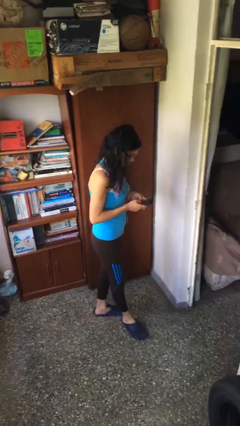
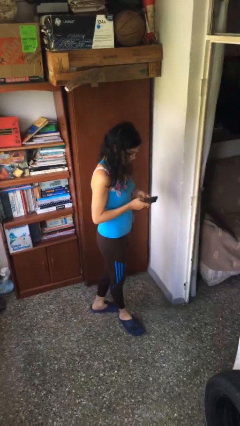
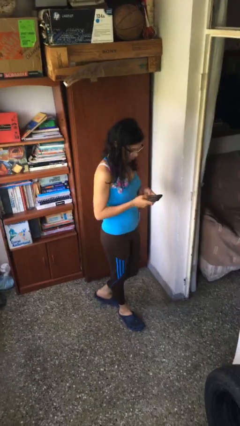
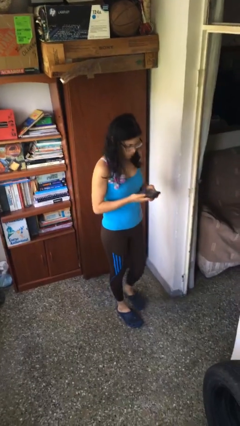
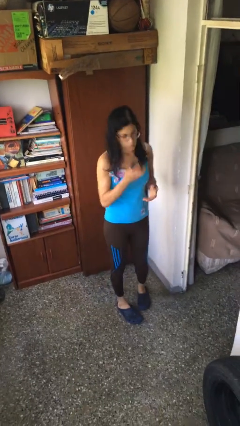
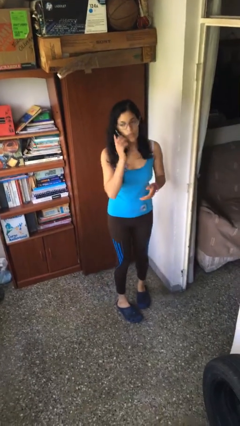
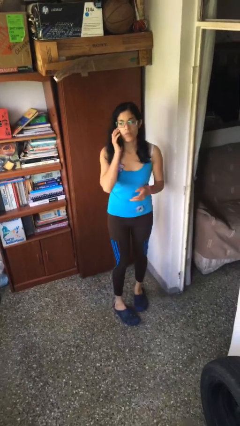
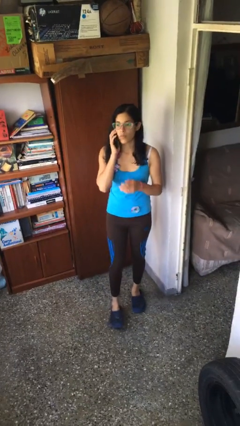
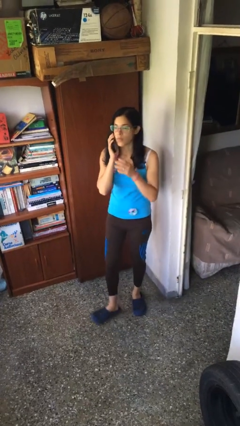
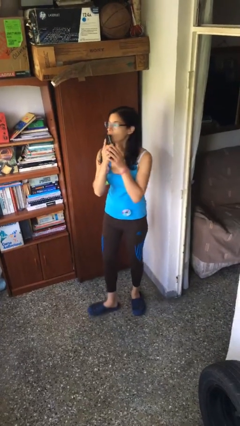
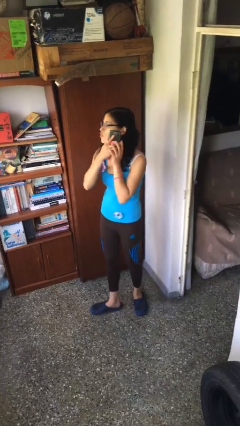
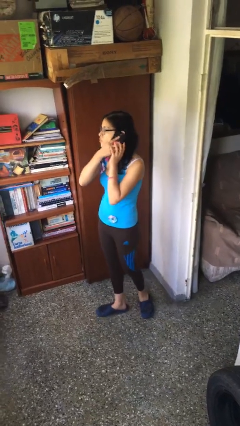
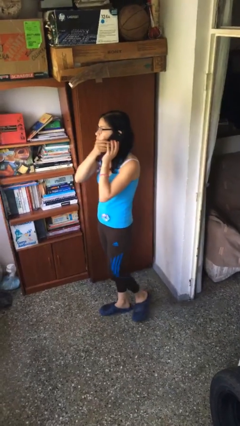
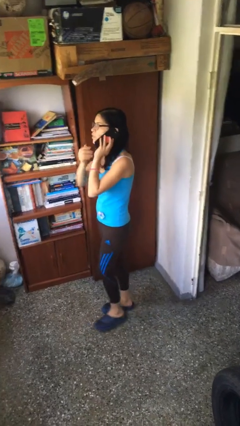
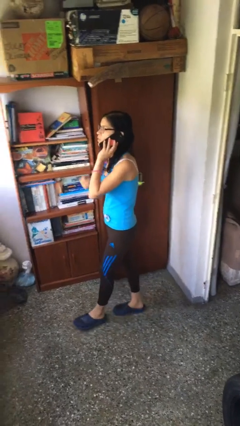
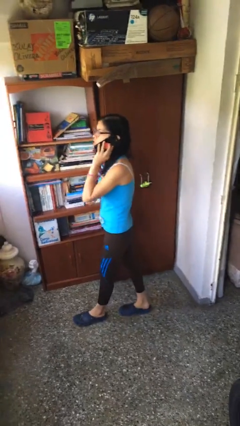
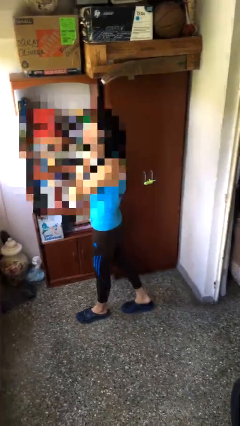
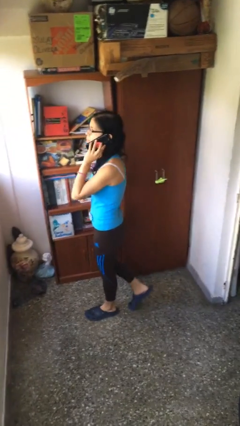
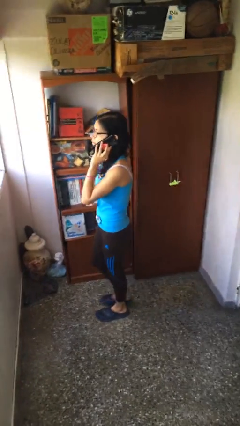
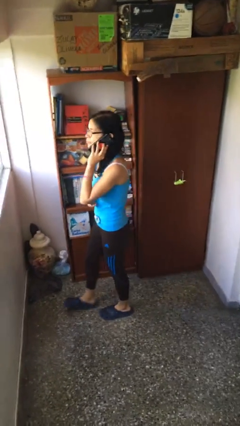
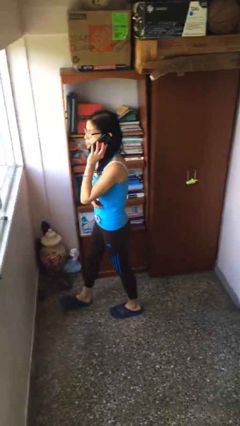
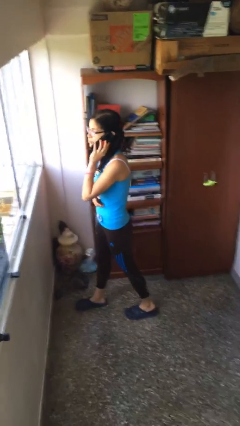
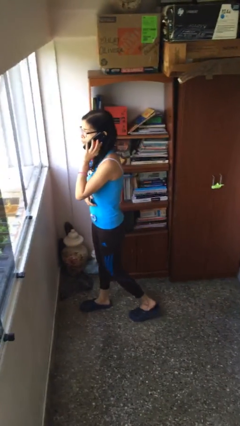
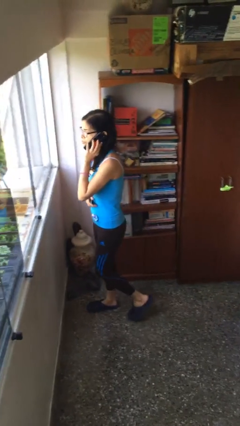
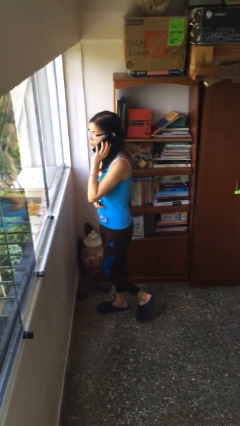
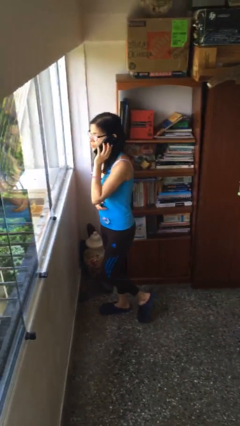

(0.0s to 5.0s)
person talks on phone

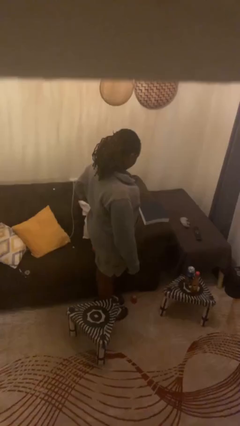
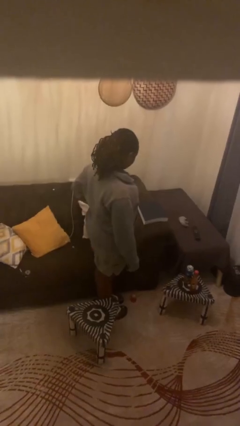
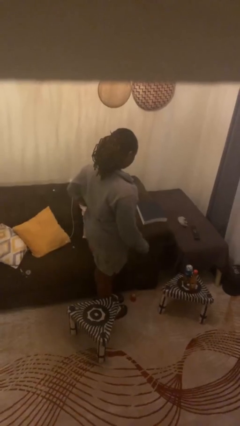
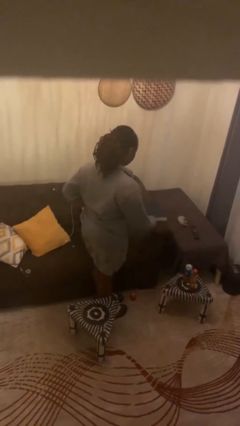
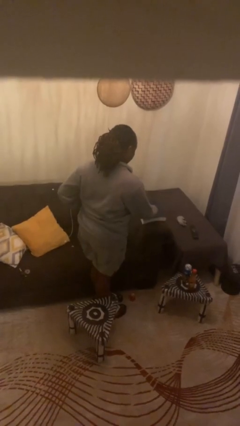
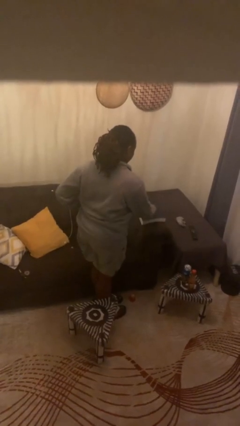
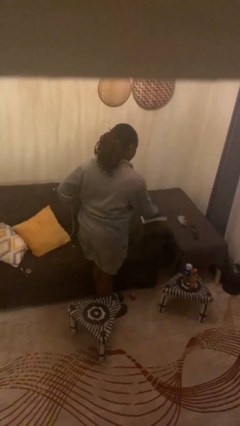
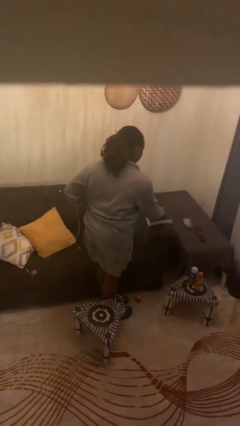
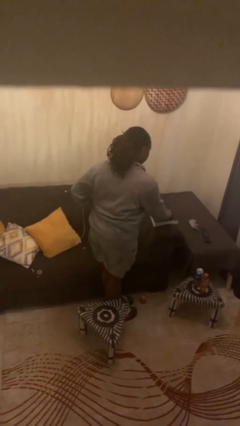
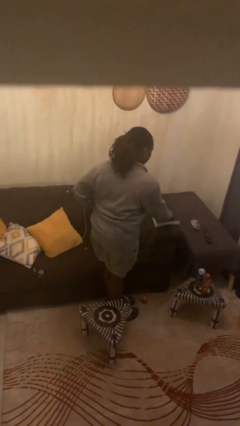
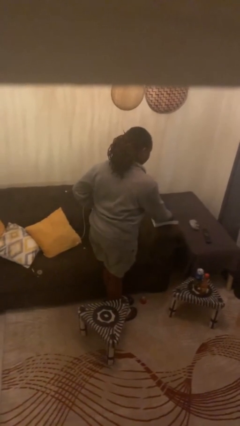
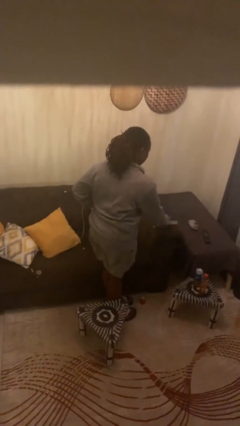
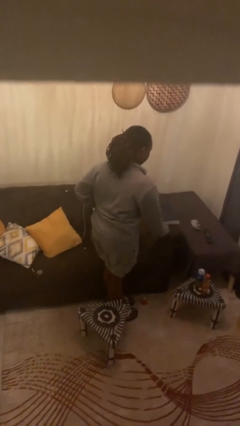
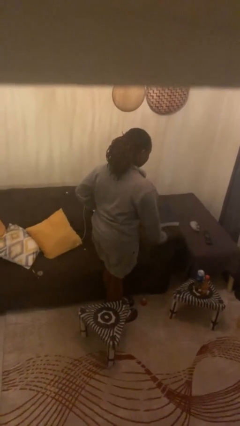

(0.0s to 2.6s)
person taps object with finger

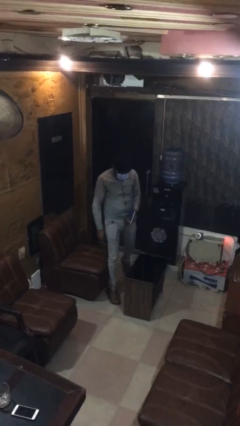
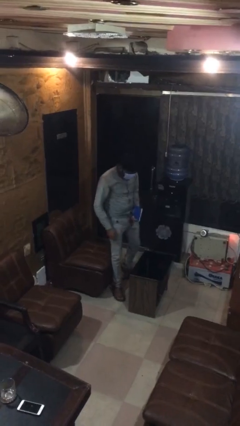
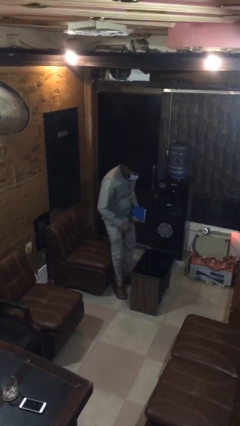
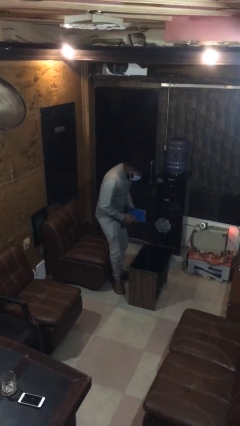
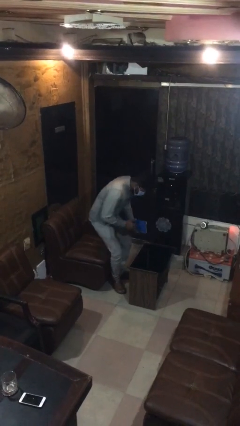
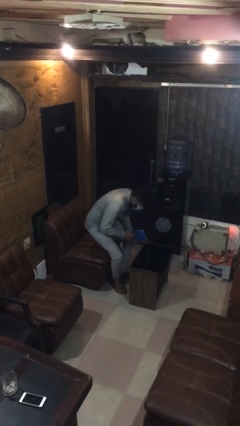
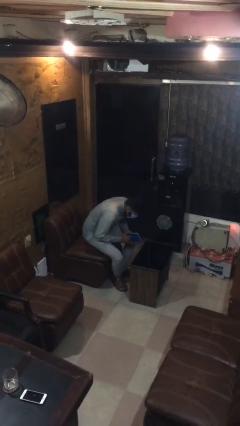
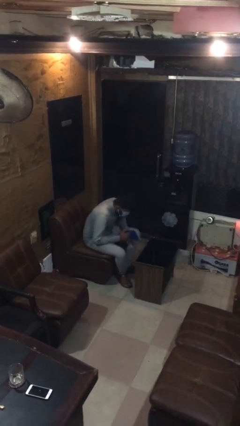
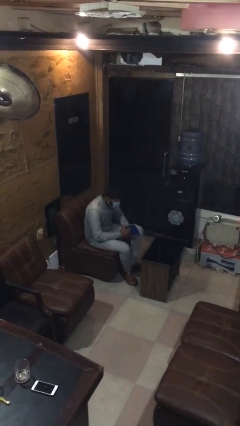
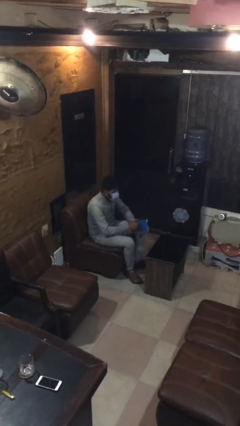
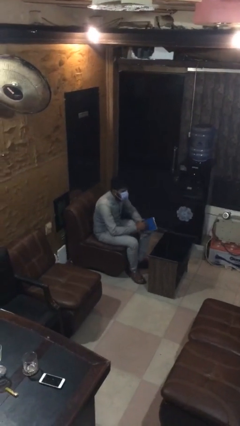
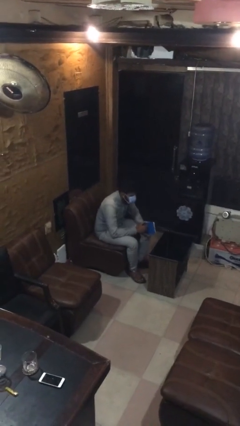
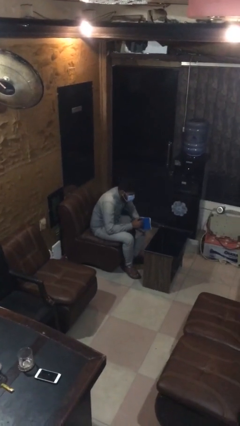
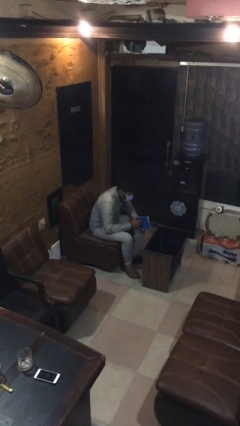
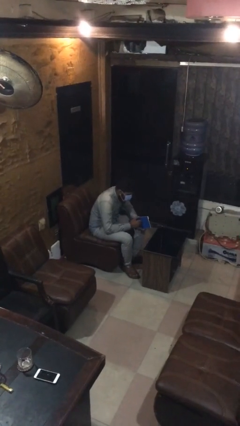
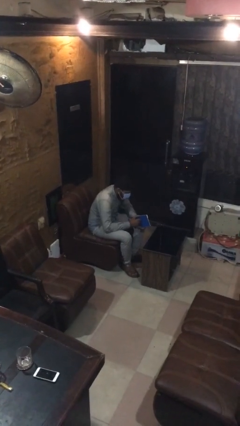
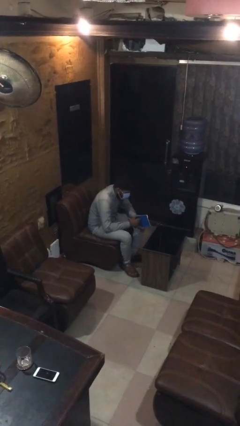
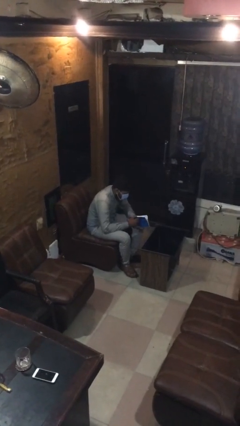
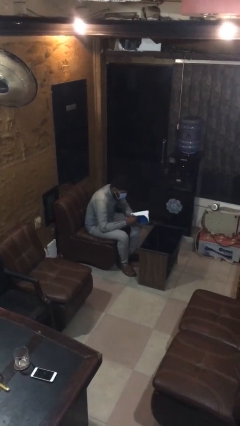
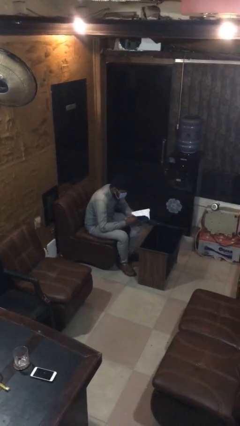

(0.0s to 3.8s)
person sits down

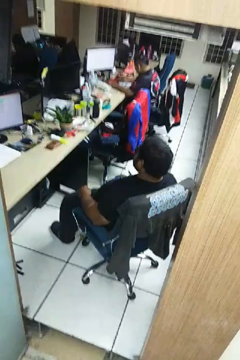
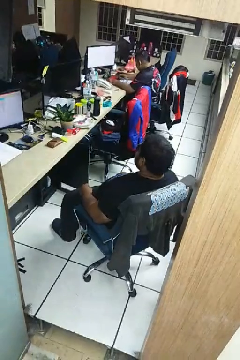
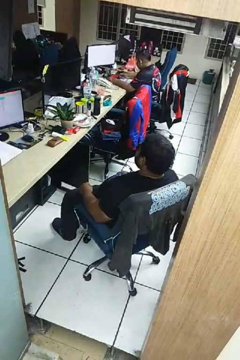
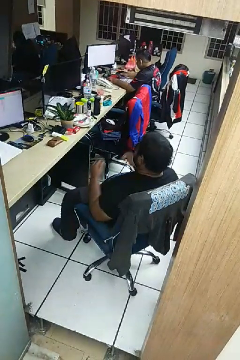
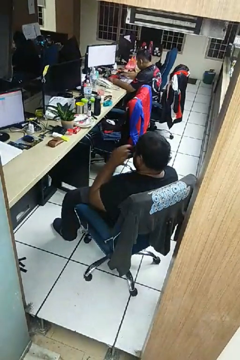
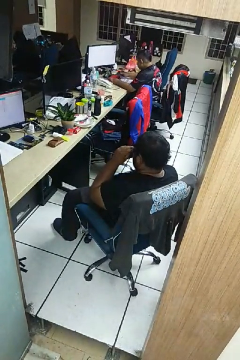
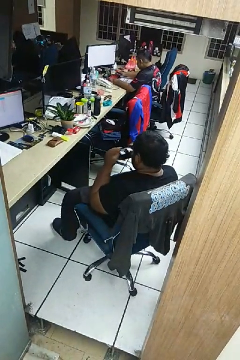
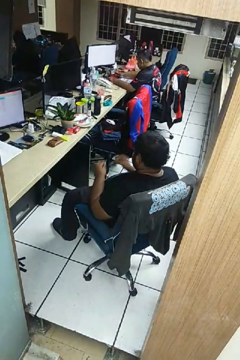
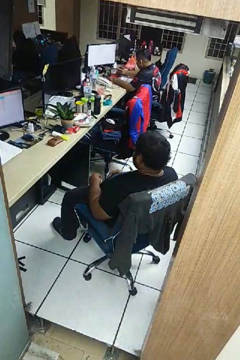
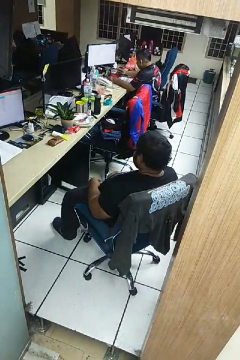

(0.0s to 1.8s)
person takes off sunglasses

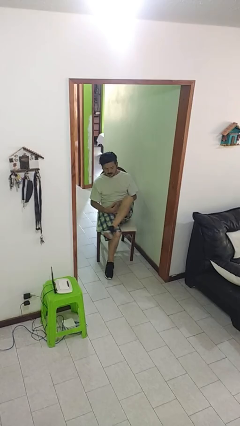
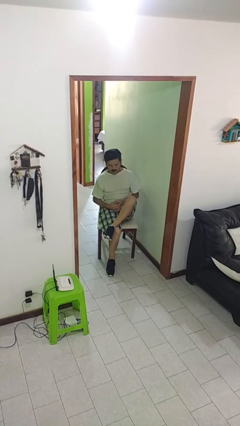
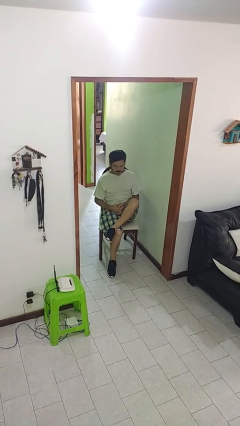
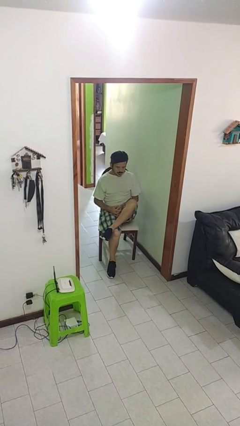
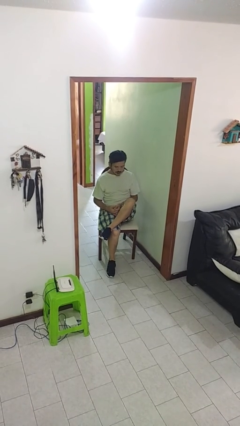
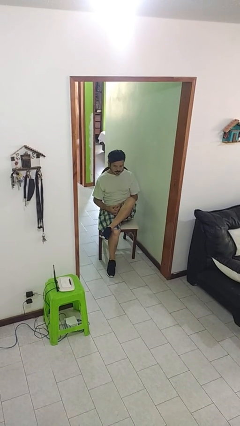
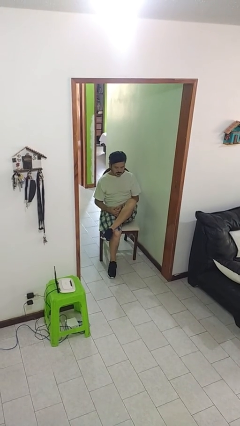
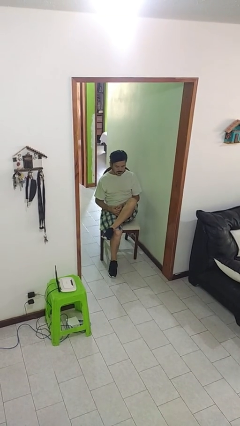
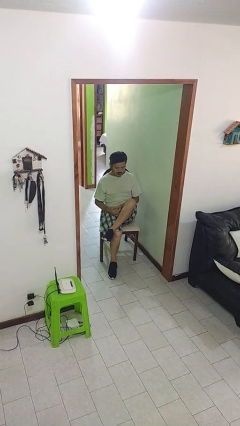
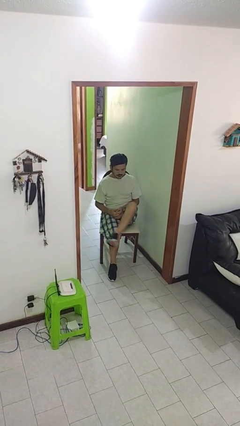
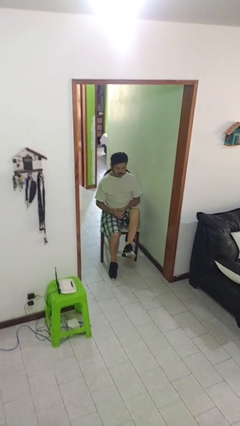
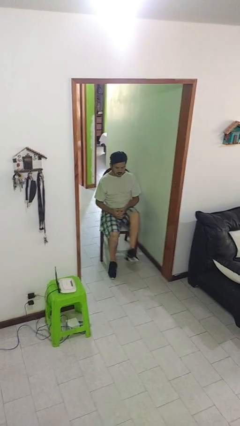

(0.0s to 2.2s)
person crosses legs

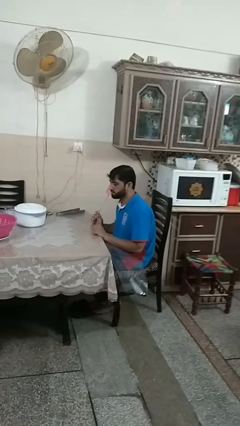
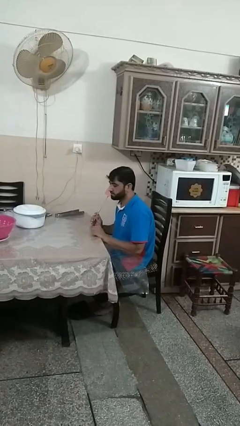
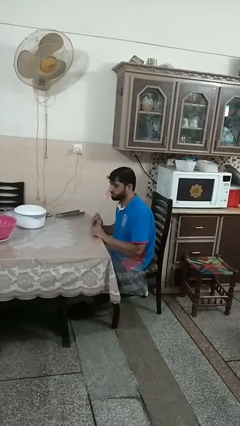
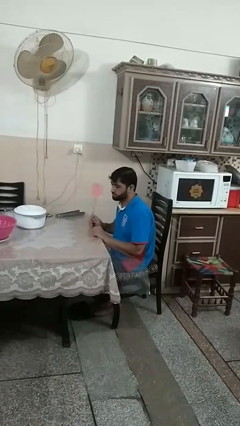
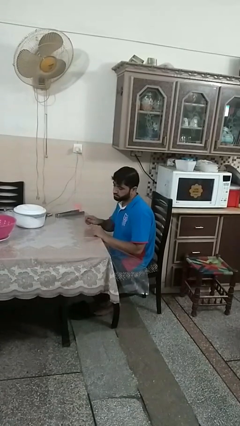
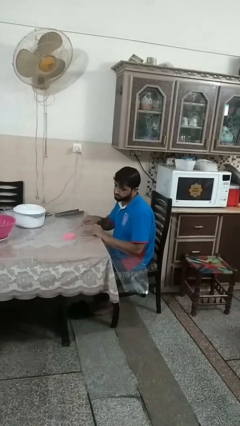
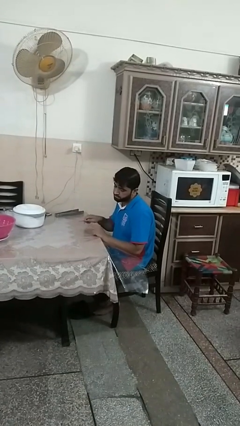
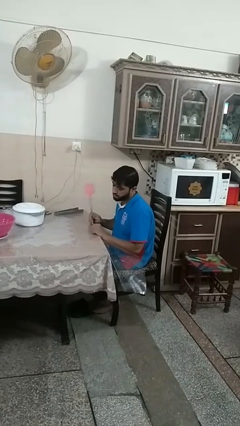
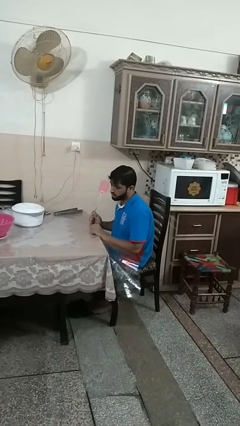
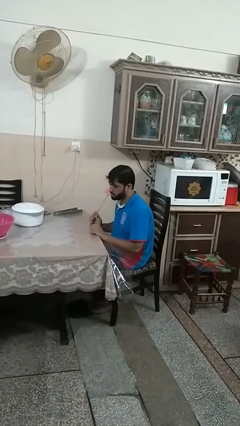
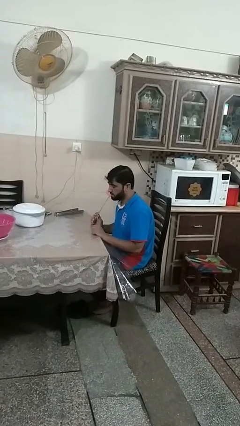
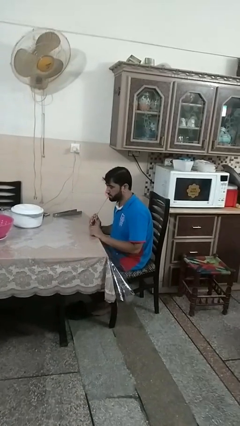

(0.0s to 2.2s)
person swats bug

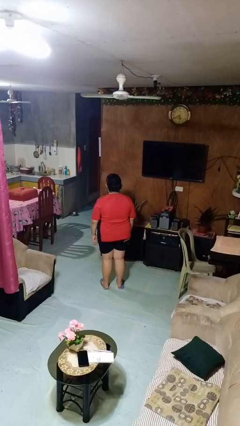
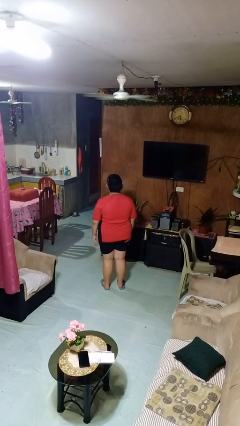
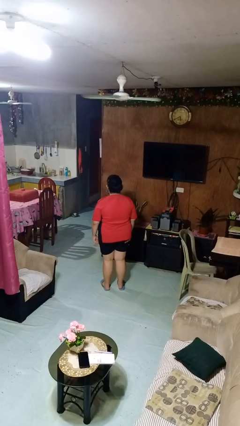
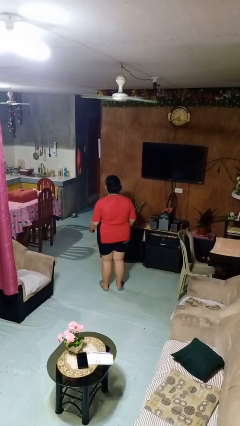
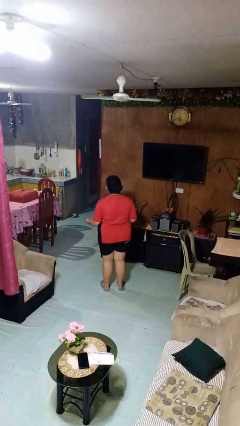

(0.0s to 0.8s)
person shrugs
